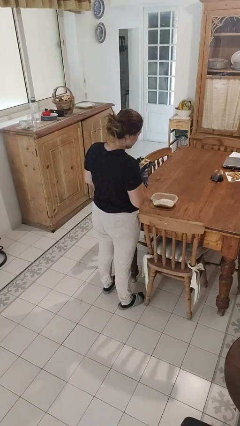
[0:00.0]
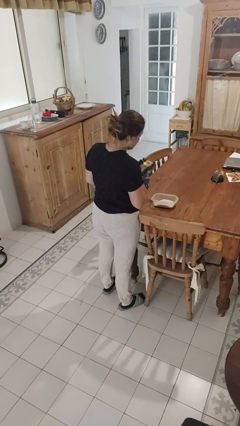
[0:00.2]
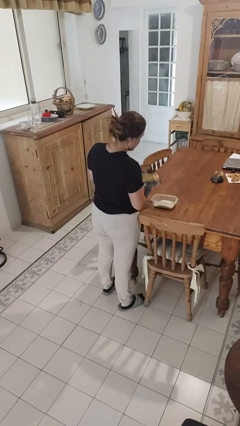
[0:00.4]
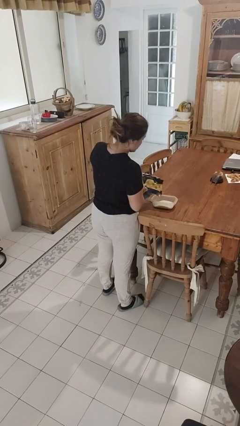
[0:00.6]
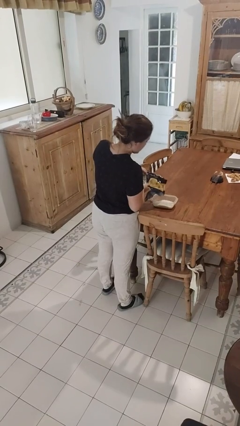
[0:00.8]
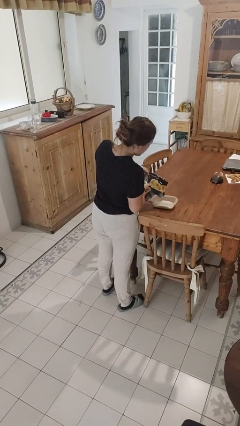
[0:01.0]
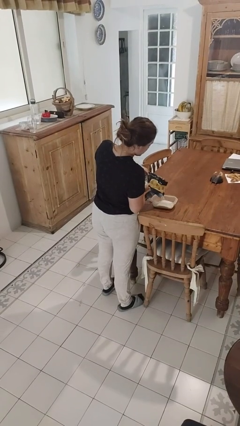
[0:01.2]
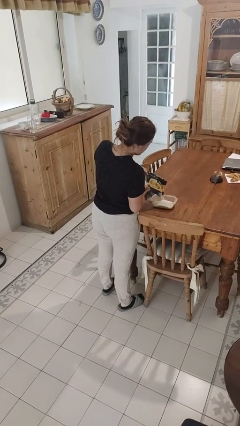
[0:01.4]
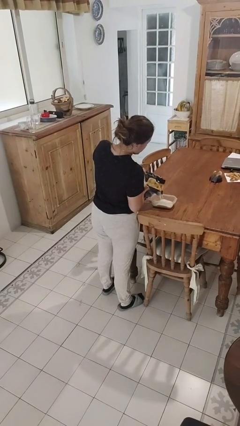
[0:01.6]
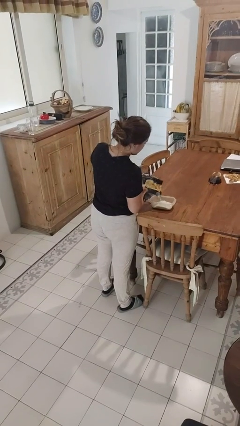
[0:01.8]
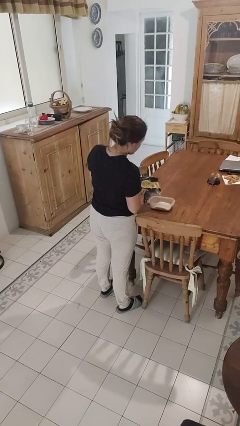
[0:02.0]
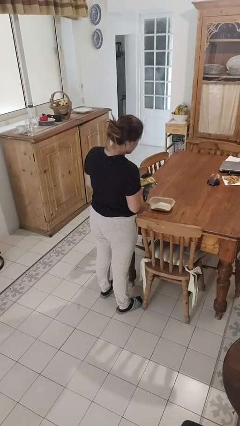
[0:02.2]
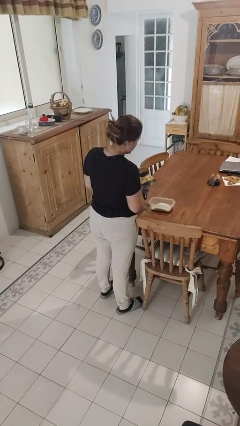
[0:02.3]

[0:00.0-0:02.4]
person pours into bowl

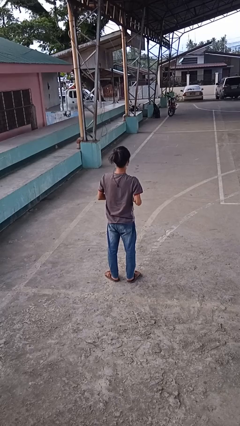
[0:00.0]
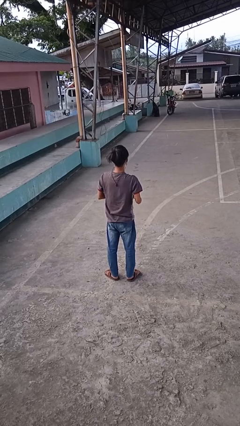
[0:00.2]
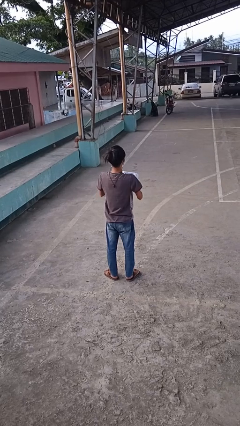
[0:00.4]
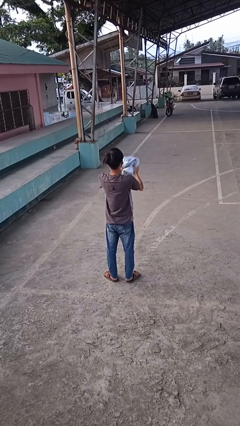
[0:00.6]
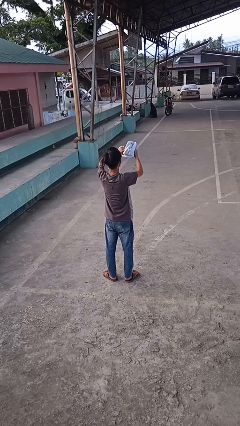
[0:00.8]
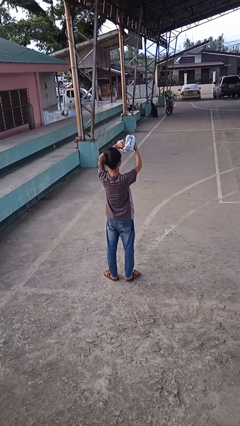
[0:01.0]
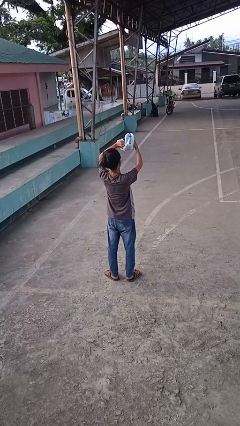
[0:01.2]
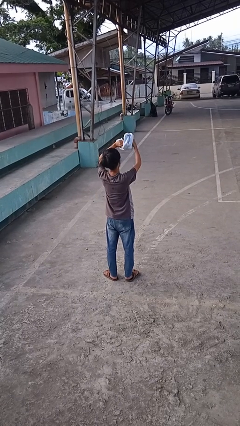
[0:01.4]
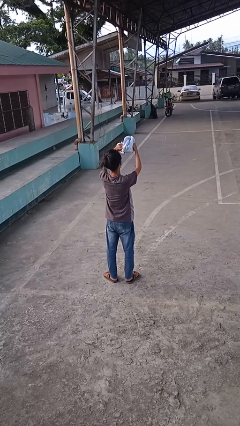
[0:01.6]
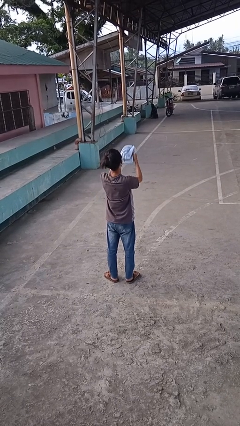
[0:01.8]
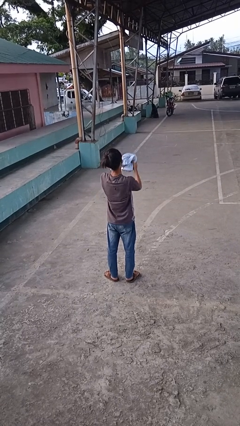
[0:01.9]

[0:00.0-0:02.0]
person squeezes object

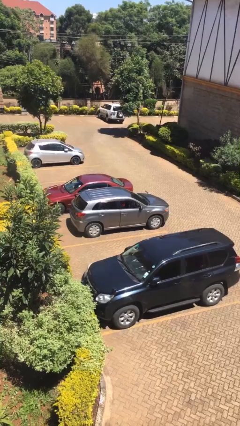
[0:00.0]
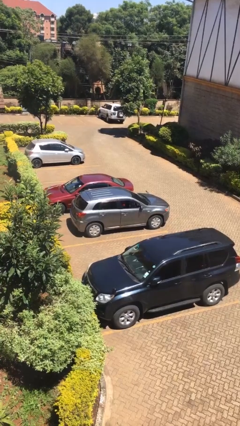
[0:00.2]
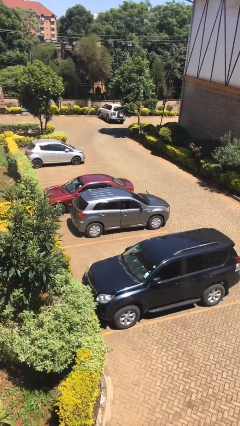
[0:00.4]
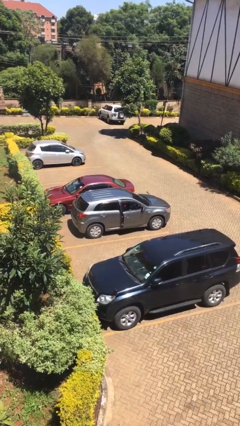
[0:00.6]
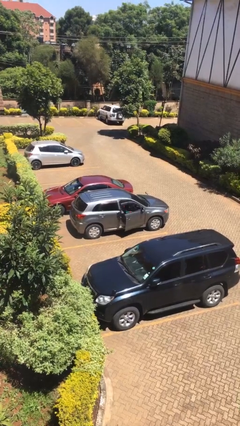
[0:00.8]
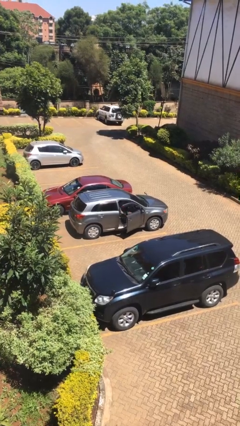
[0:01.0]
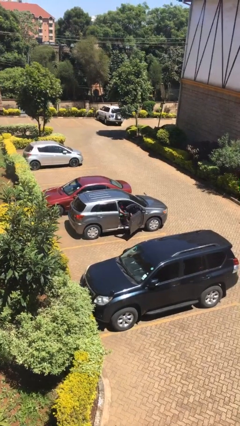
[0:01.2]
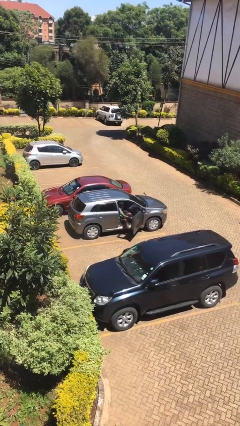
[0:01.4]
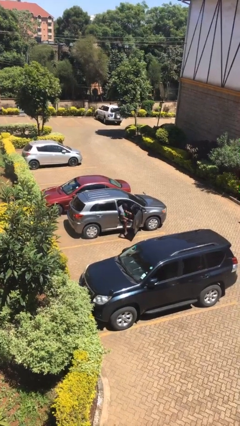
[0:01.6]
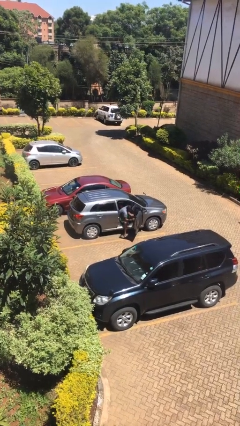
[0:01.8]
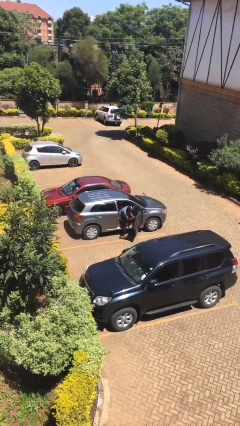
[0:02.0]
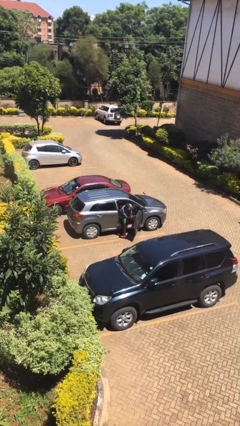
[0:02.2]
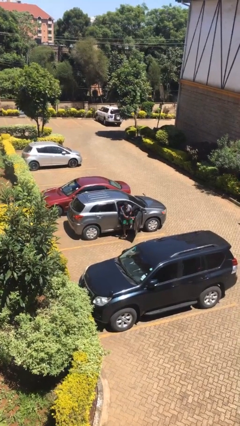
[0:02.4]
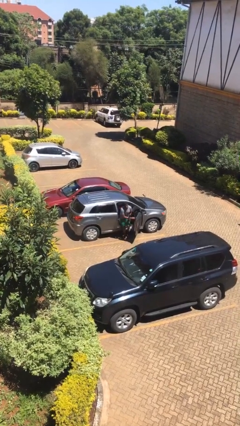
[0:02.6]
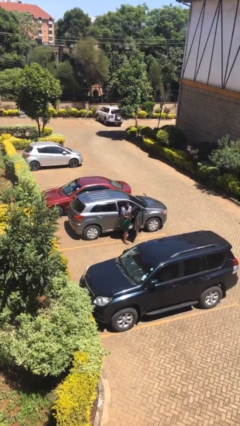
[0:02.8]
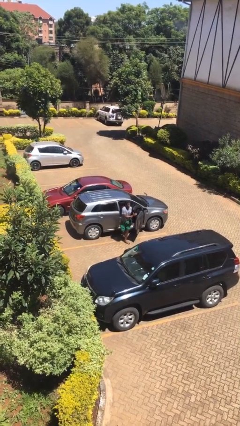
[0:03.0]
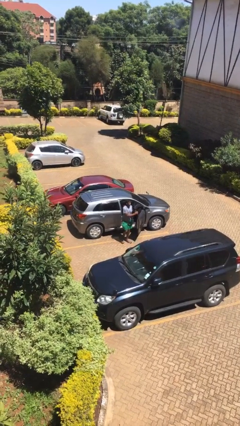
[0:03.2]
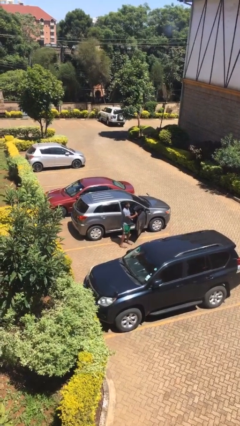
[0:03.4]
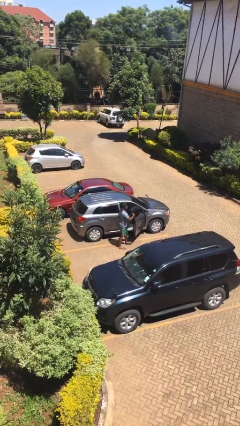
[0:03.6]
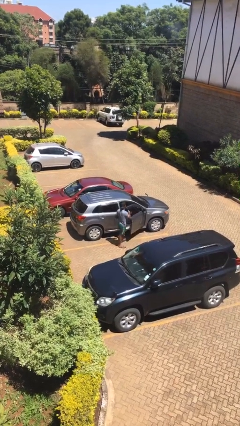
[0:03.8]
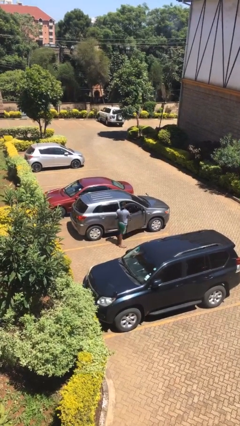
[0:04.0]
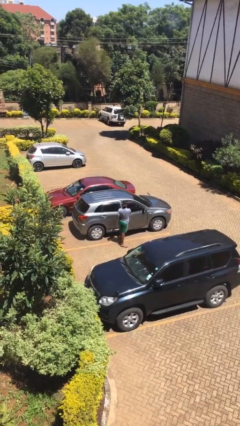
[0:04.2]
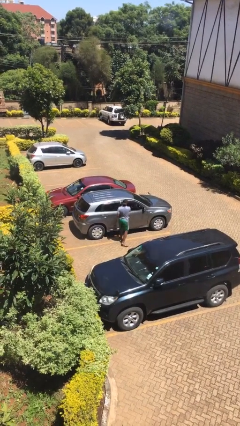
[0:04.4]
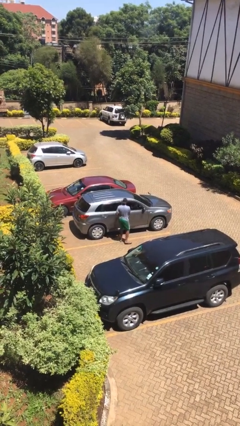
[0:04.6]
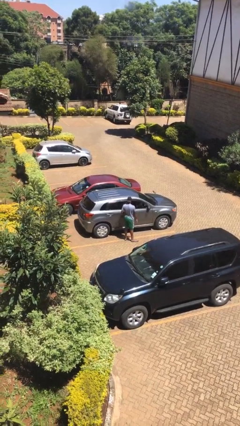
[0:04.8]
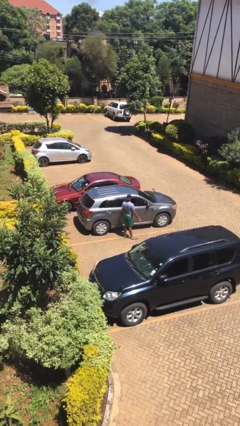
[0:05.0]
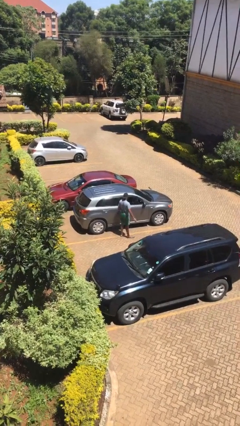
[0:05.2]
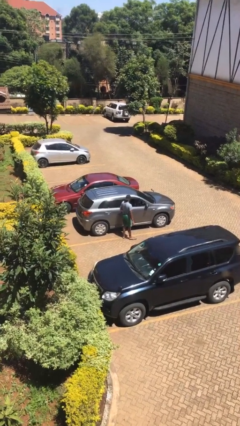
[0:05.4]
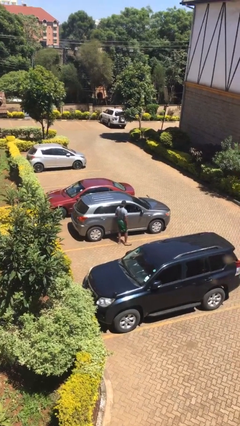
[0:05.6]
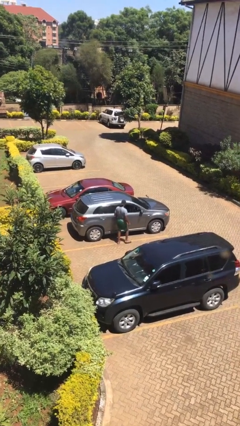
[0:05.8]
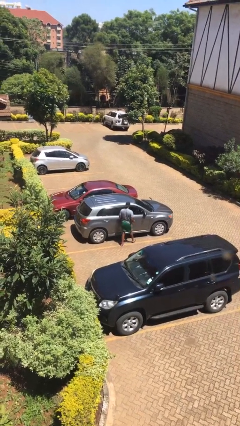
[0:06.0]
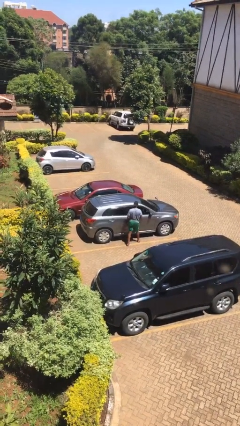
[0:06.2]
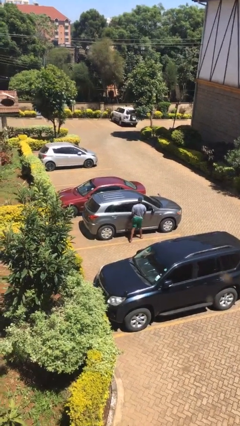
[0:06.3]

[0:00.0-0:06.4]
car drops off person

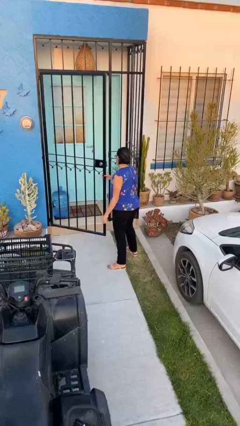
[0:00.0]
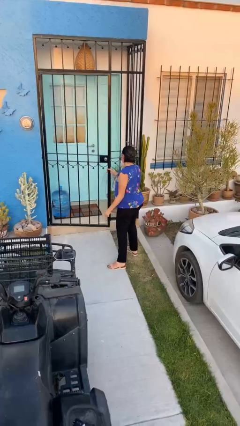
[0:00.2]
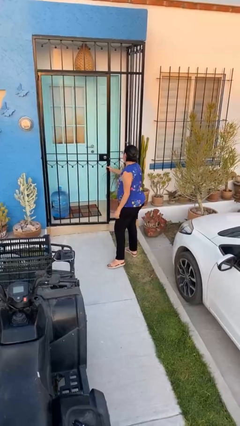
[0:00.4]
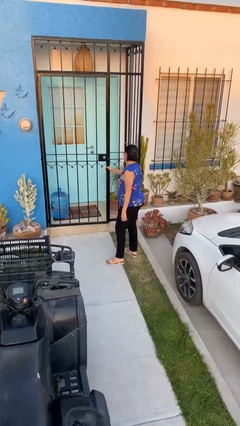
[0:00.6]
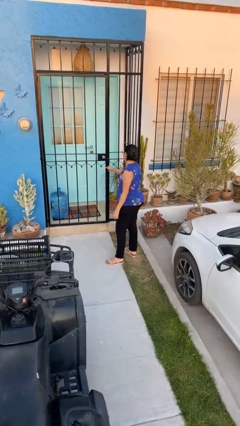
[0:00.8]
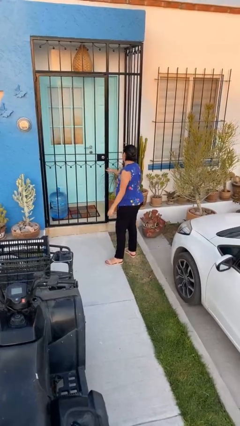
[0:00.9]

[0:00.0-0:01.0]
person closes facility door

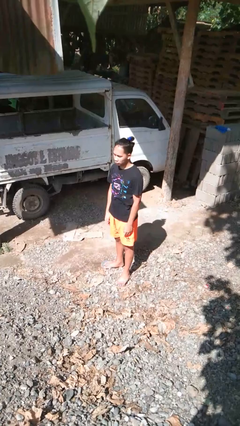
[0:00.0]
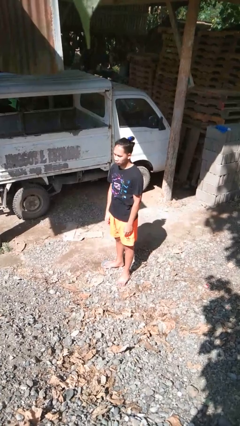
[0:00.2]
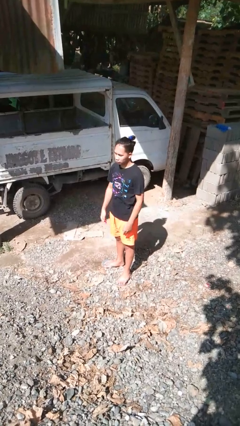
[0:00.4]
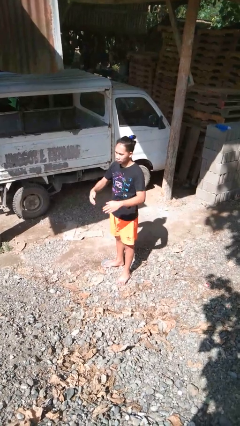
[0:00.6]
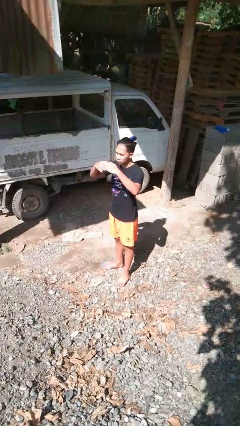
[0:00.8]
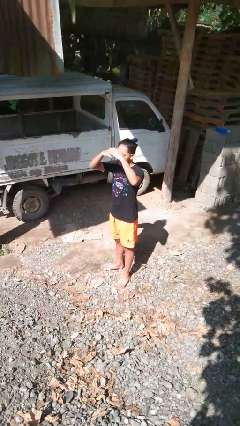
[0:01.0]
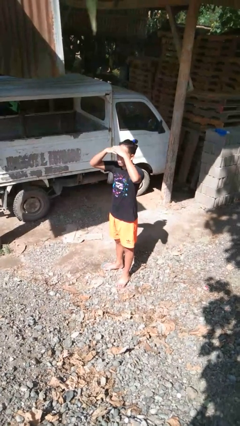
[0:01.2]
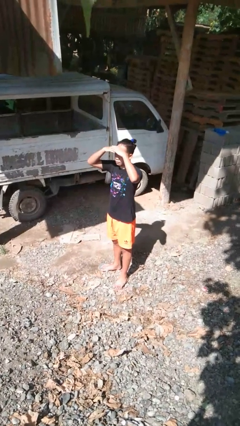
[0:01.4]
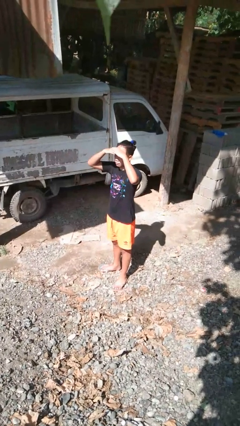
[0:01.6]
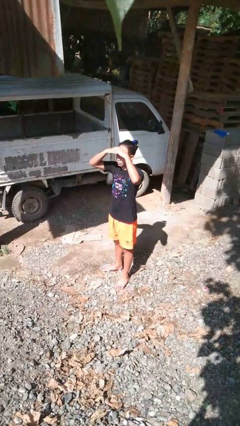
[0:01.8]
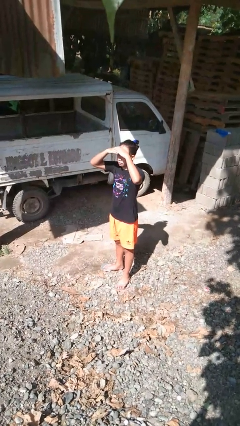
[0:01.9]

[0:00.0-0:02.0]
person shades eyes

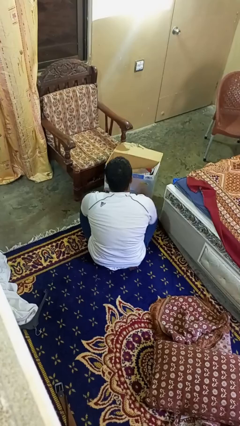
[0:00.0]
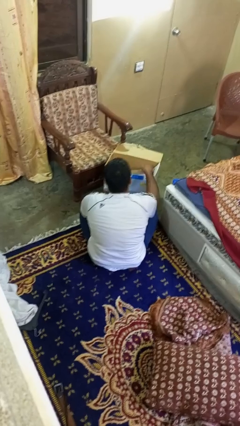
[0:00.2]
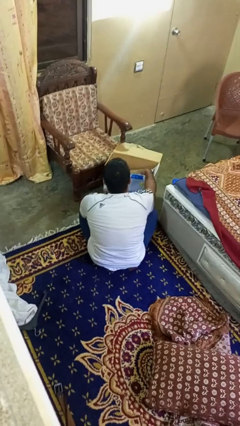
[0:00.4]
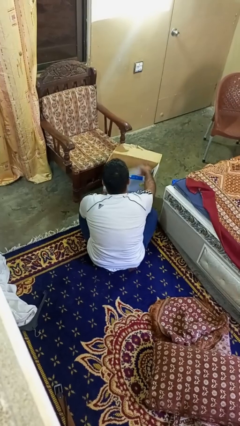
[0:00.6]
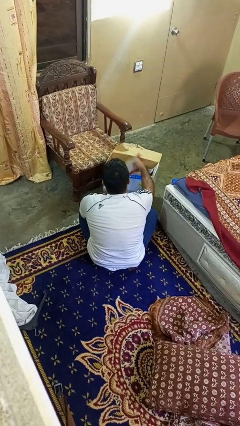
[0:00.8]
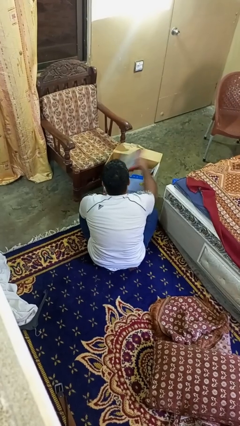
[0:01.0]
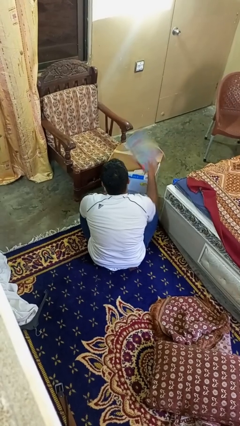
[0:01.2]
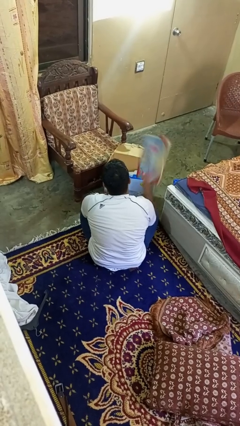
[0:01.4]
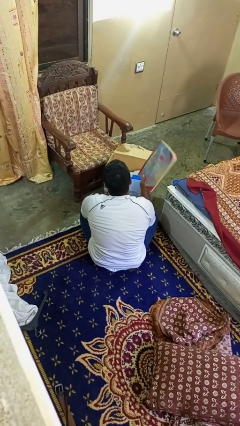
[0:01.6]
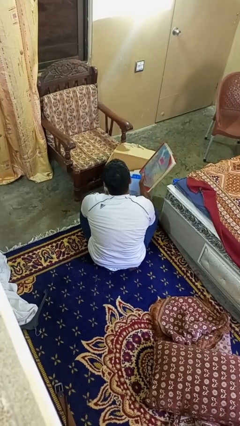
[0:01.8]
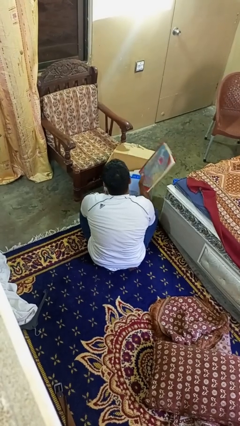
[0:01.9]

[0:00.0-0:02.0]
person takes object from box

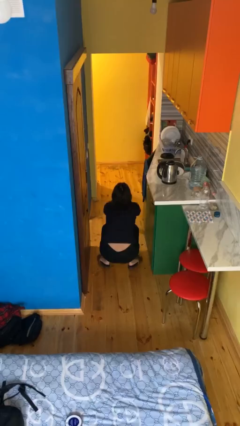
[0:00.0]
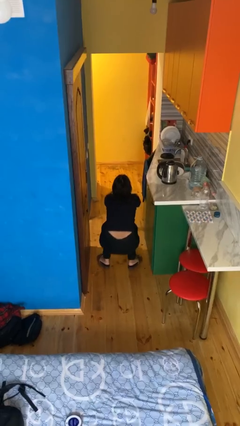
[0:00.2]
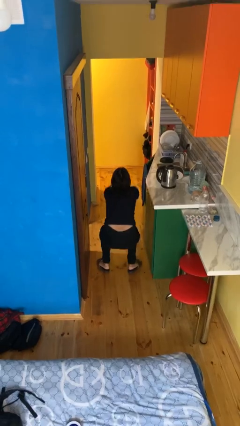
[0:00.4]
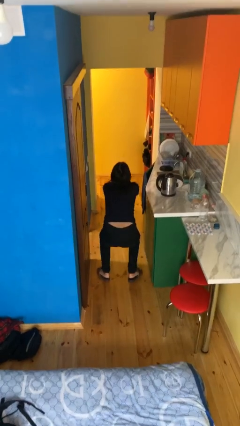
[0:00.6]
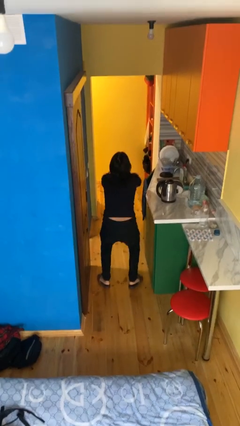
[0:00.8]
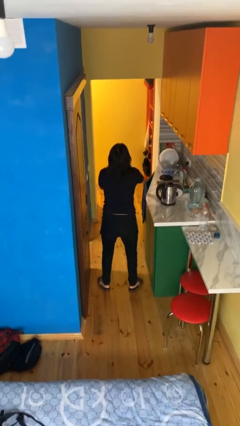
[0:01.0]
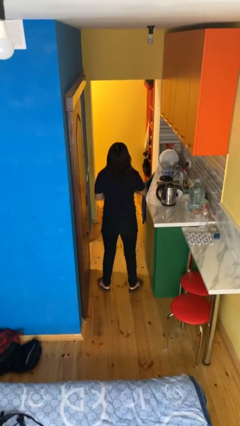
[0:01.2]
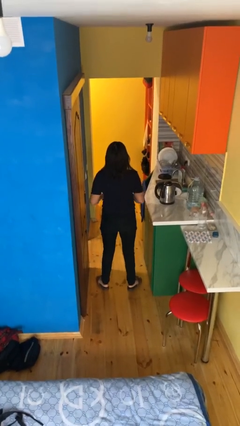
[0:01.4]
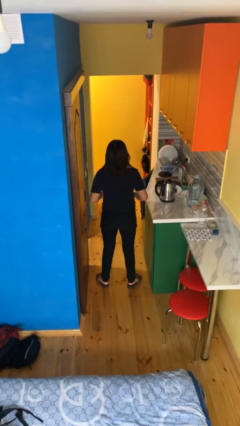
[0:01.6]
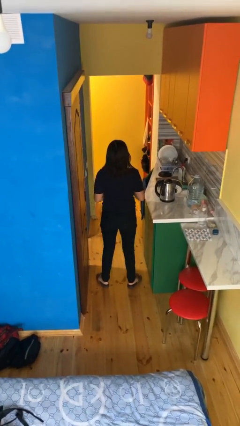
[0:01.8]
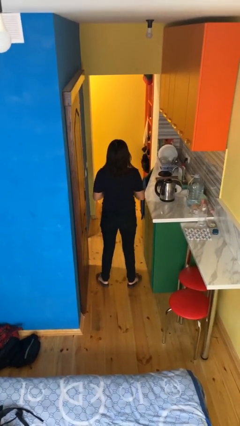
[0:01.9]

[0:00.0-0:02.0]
person stands up
